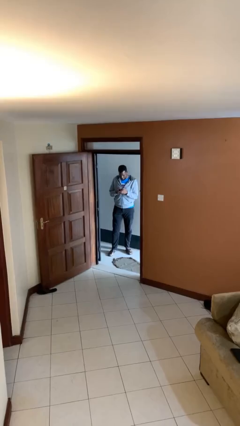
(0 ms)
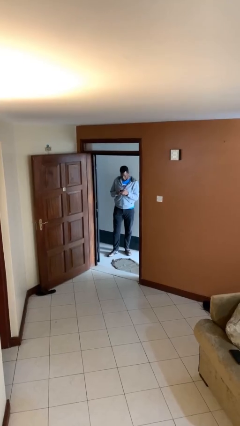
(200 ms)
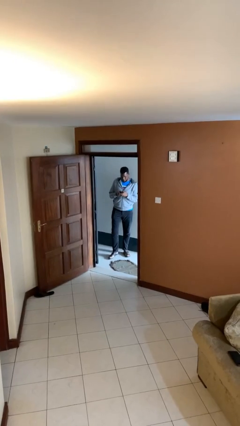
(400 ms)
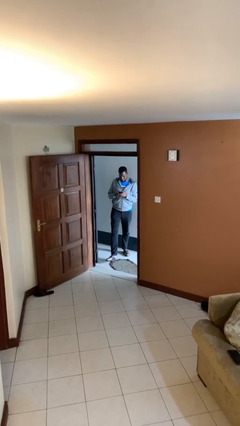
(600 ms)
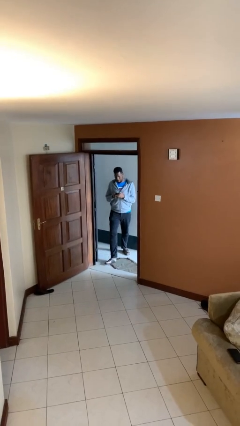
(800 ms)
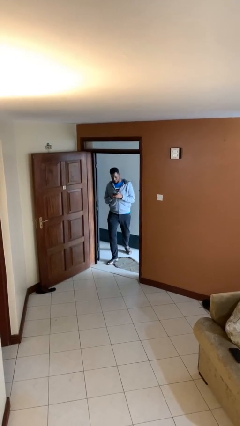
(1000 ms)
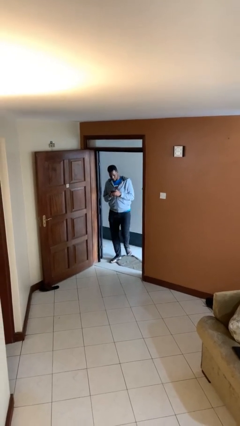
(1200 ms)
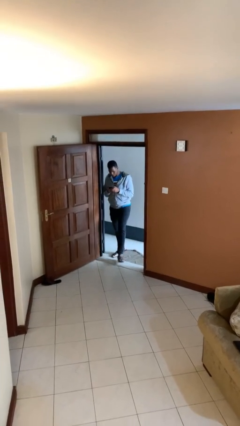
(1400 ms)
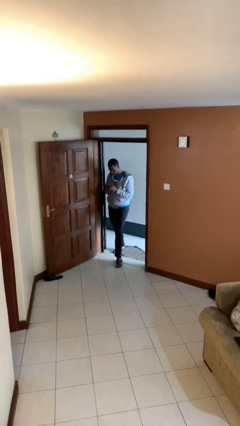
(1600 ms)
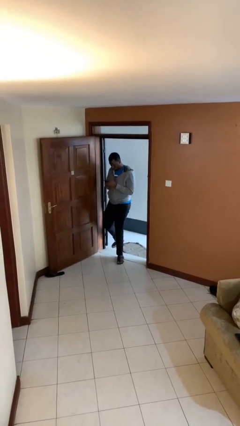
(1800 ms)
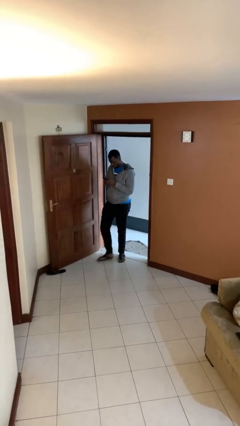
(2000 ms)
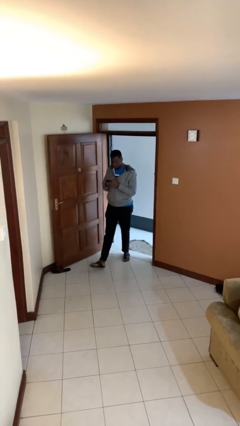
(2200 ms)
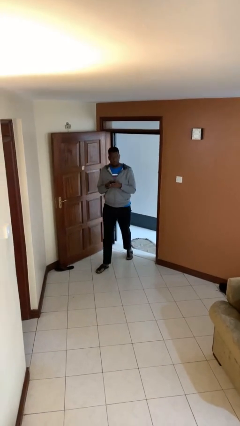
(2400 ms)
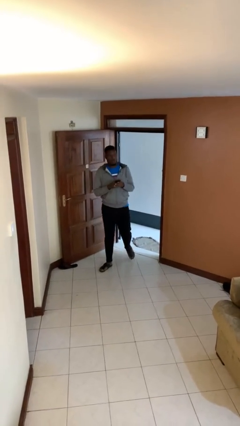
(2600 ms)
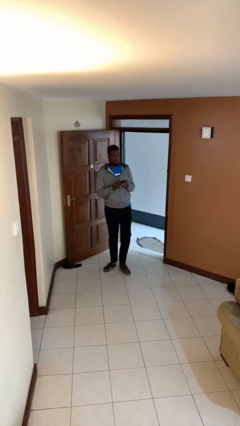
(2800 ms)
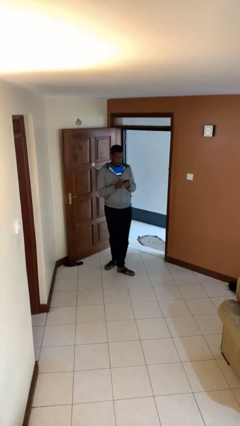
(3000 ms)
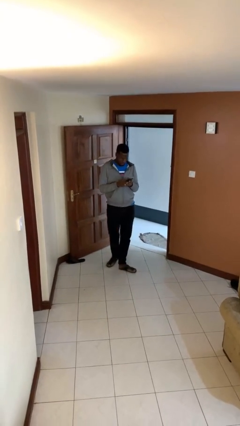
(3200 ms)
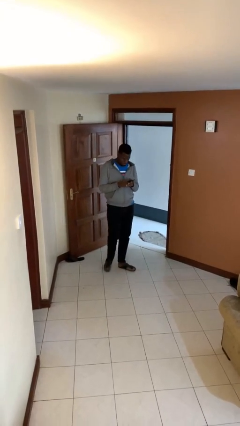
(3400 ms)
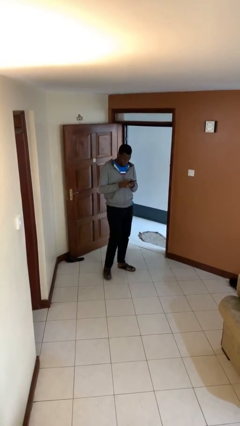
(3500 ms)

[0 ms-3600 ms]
person enters scene through structure

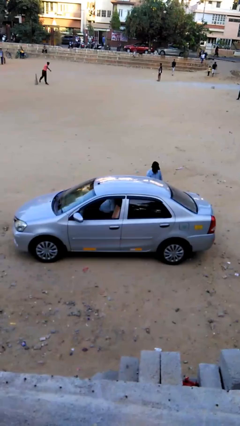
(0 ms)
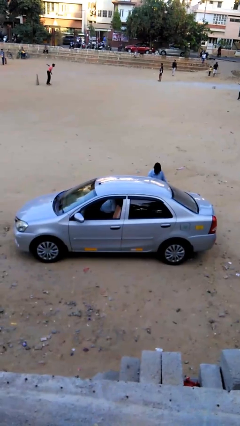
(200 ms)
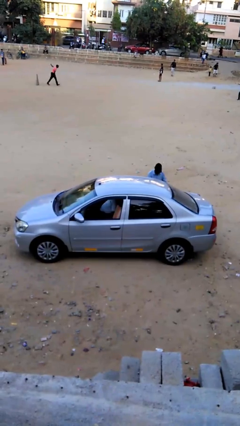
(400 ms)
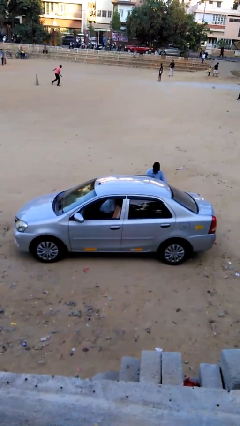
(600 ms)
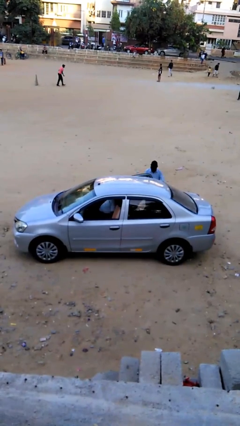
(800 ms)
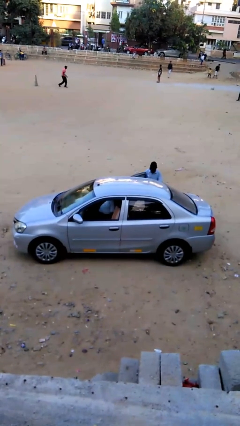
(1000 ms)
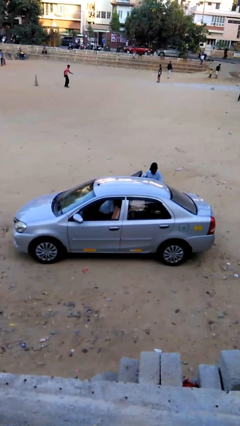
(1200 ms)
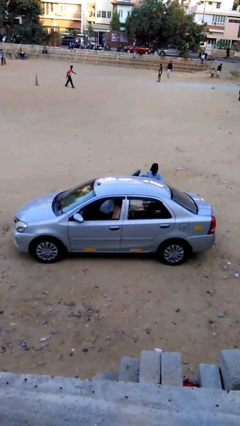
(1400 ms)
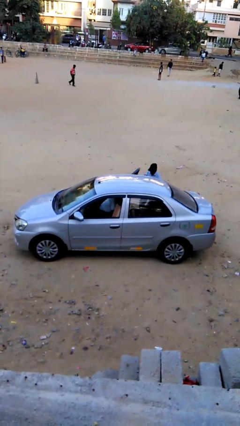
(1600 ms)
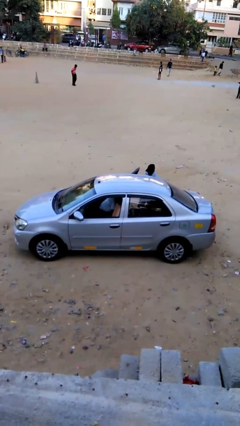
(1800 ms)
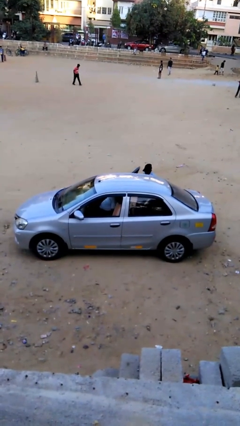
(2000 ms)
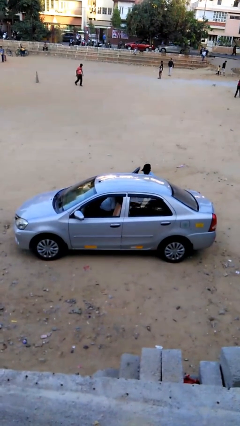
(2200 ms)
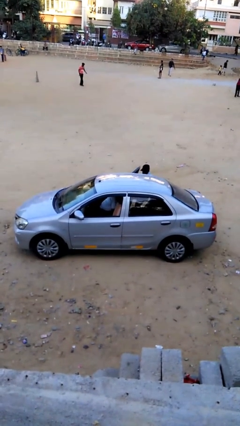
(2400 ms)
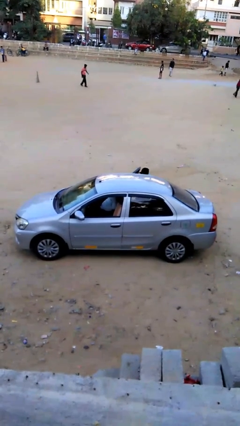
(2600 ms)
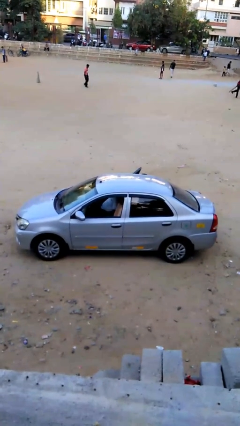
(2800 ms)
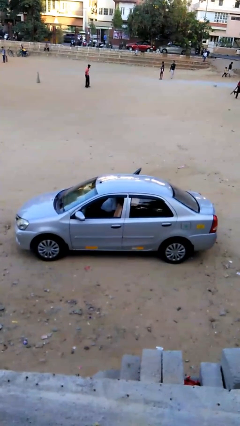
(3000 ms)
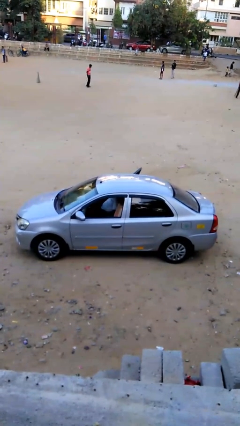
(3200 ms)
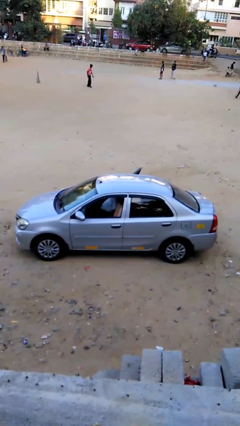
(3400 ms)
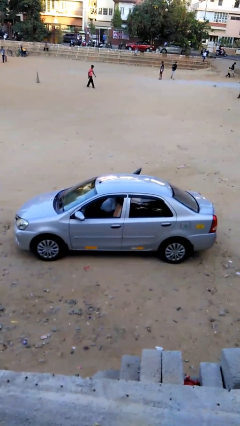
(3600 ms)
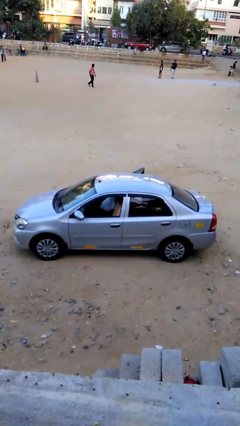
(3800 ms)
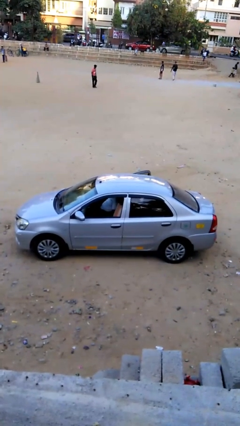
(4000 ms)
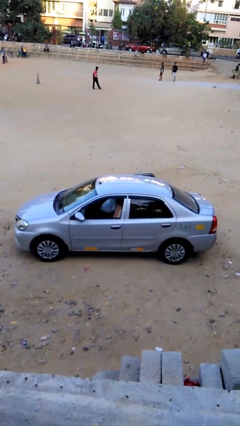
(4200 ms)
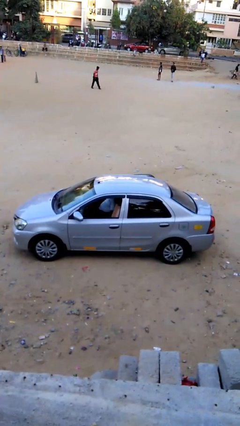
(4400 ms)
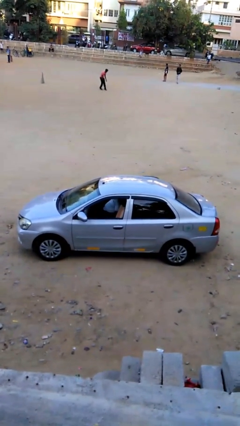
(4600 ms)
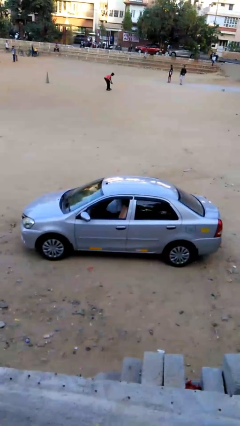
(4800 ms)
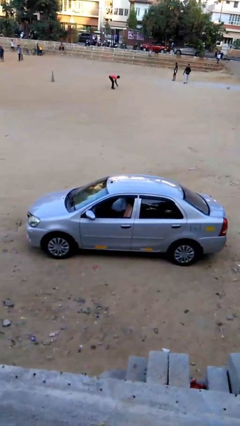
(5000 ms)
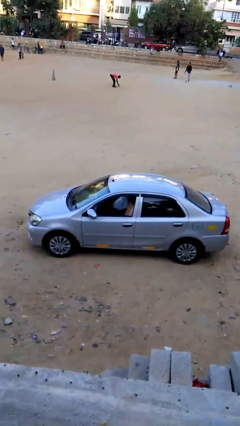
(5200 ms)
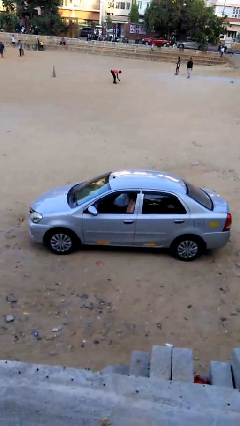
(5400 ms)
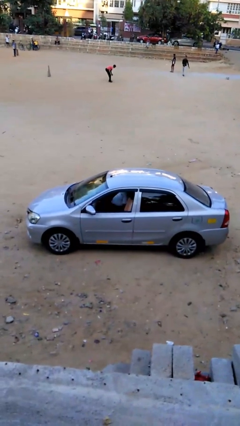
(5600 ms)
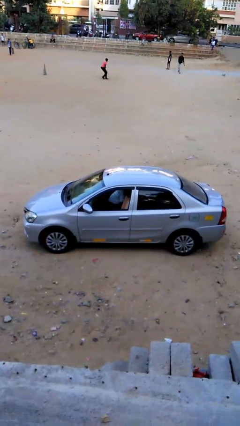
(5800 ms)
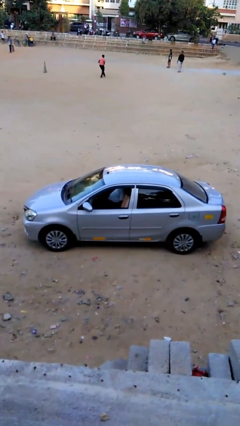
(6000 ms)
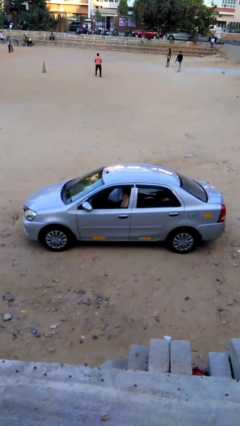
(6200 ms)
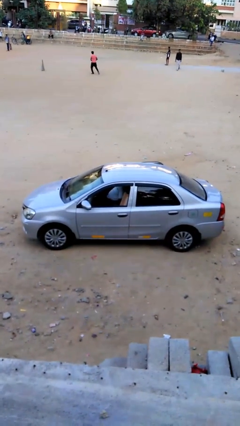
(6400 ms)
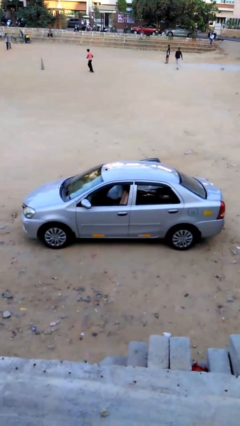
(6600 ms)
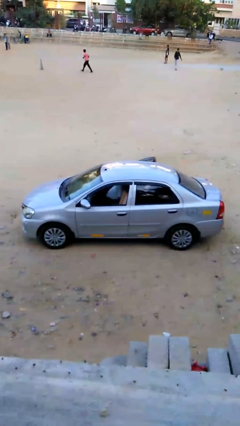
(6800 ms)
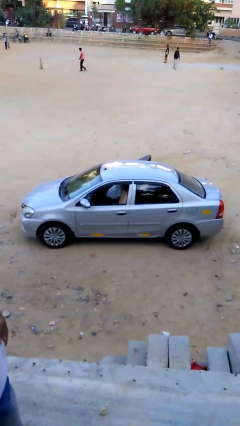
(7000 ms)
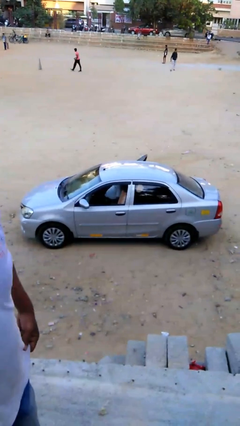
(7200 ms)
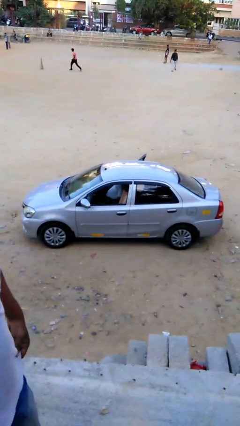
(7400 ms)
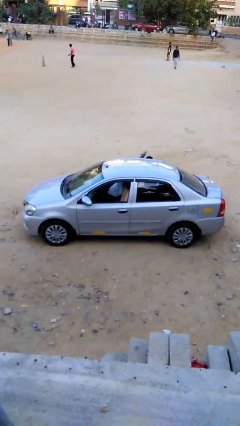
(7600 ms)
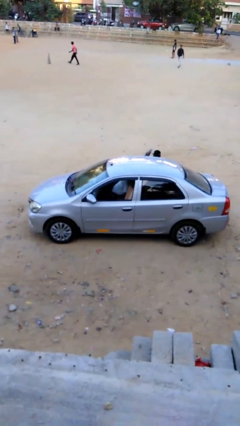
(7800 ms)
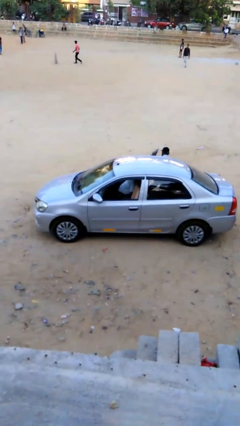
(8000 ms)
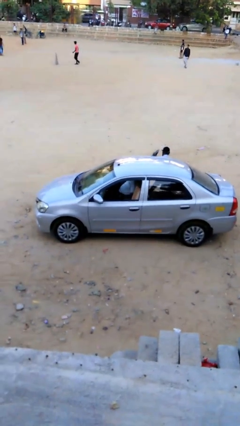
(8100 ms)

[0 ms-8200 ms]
car picks up person

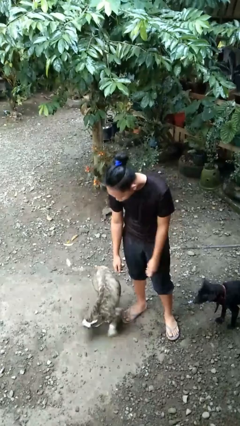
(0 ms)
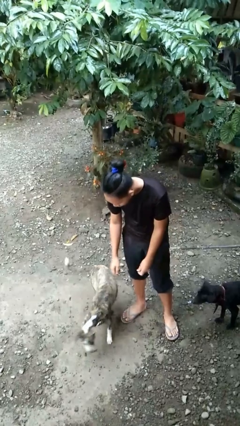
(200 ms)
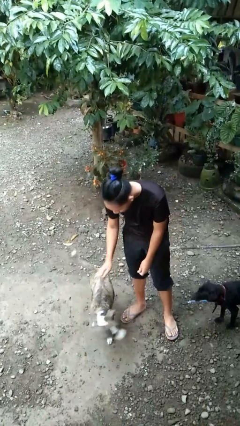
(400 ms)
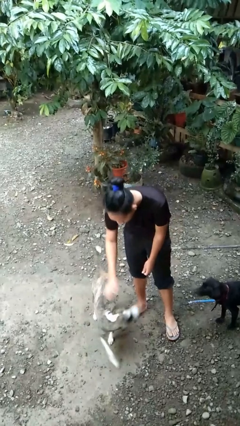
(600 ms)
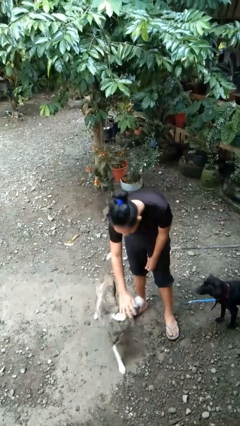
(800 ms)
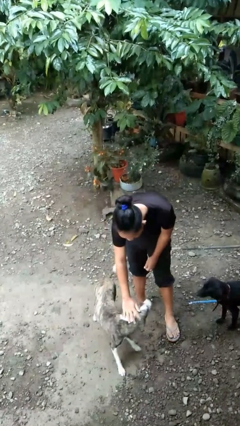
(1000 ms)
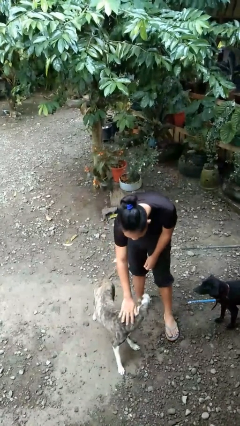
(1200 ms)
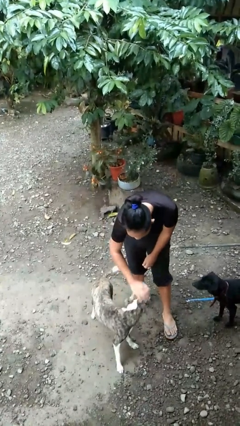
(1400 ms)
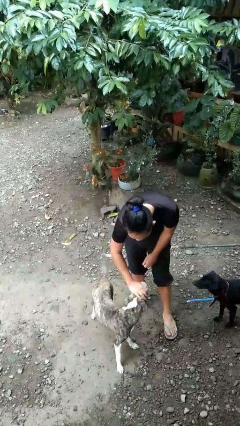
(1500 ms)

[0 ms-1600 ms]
person pets dog

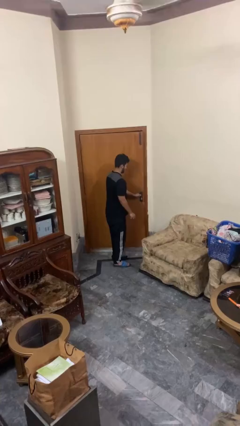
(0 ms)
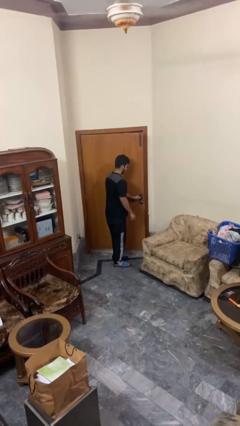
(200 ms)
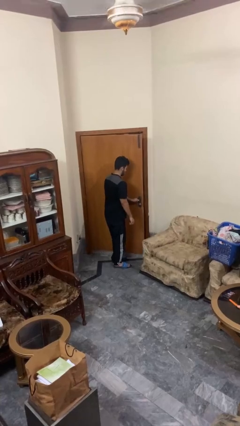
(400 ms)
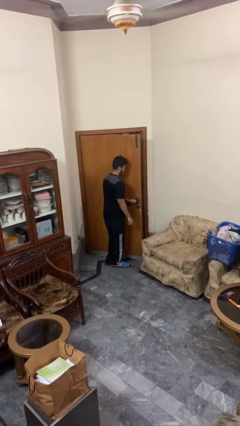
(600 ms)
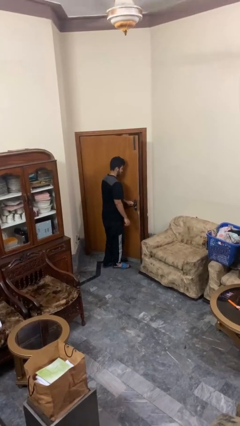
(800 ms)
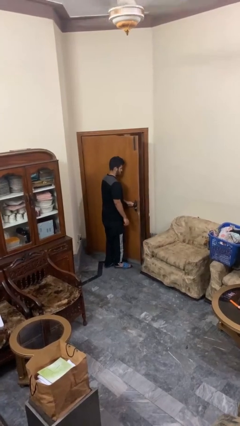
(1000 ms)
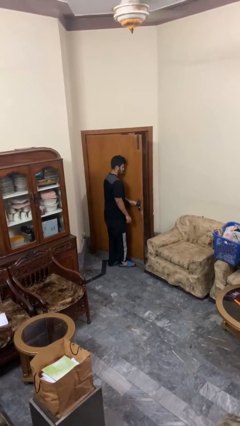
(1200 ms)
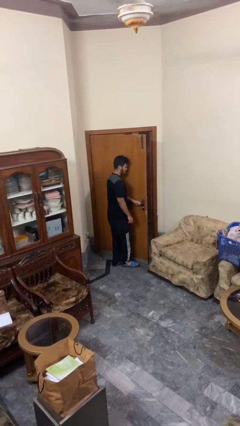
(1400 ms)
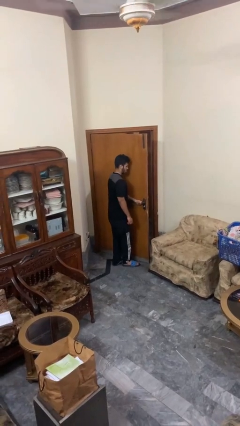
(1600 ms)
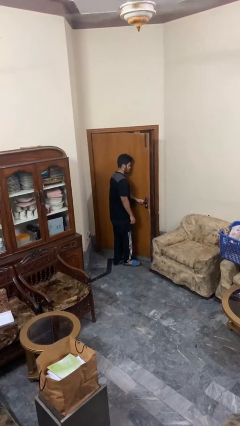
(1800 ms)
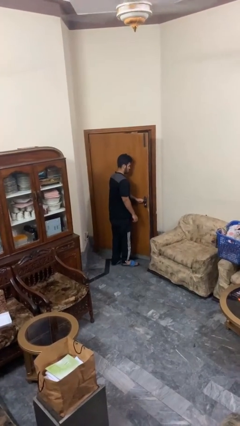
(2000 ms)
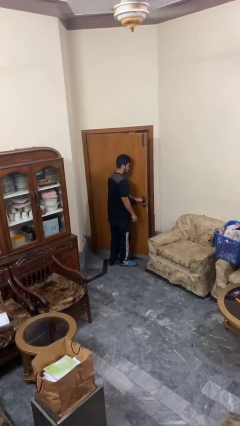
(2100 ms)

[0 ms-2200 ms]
person opens facility door

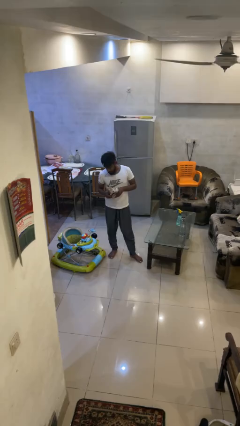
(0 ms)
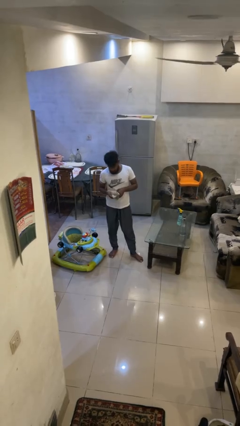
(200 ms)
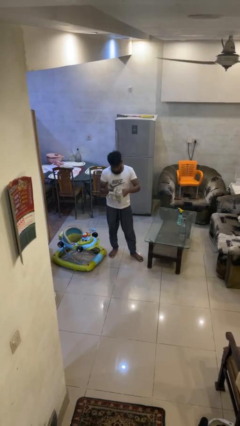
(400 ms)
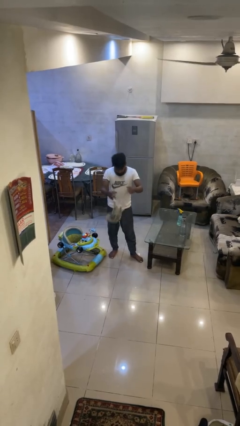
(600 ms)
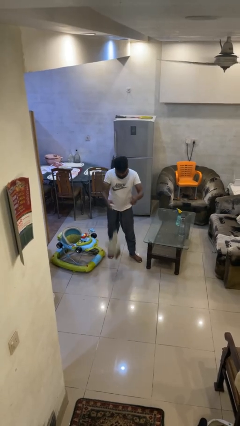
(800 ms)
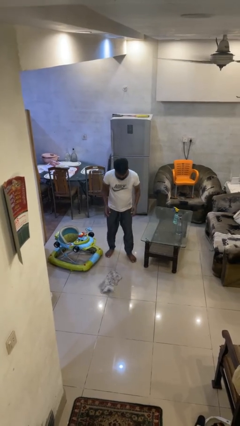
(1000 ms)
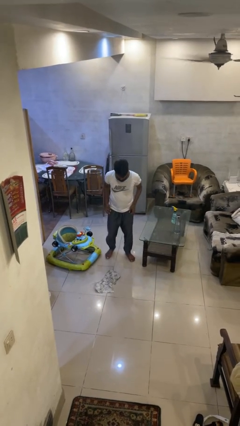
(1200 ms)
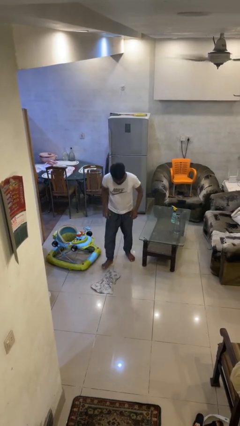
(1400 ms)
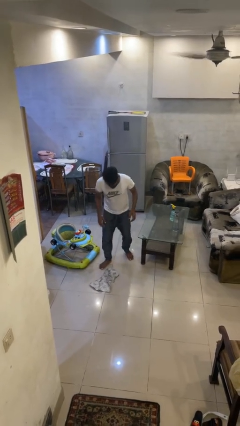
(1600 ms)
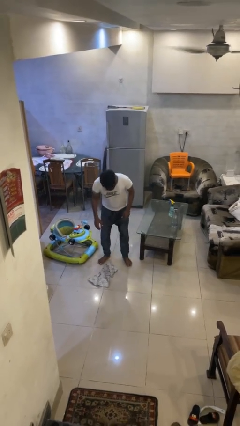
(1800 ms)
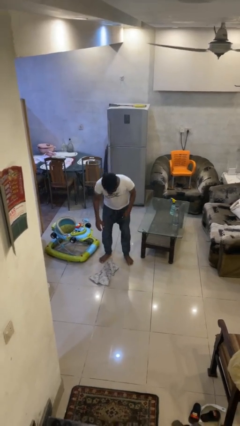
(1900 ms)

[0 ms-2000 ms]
person drops object

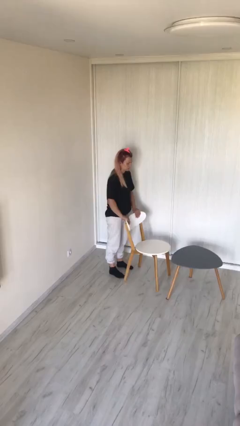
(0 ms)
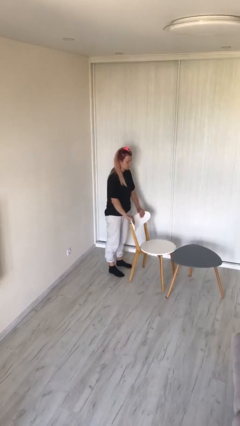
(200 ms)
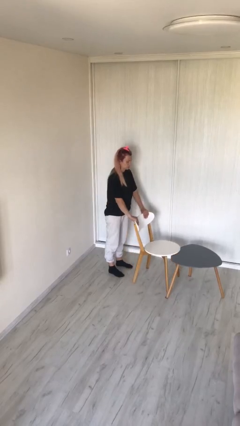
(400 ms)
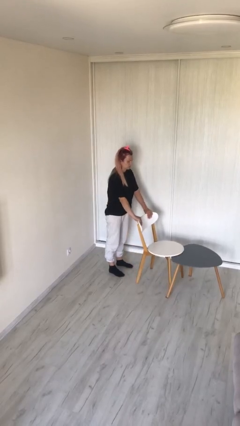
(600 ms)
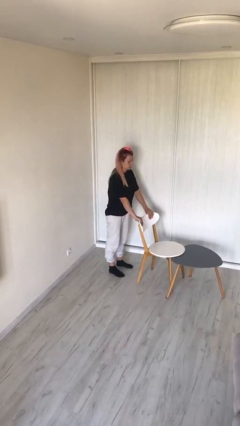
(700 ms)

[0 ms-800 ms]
person pushes in chair
